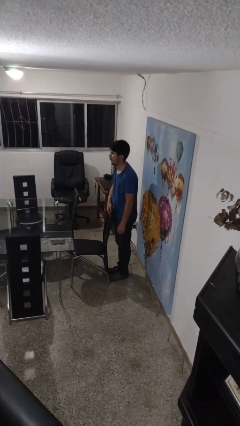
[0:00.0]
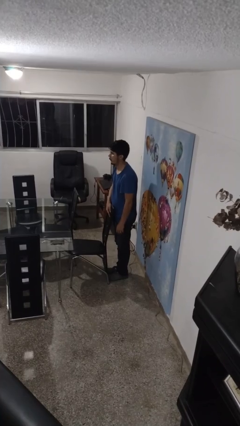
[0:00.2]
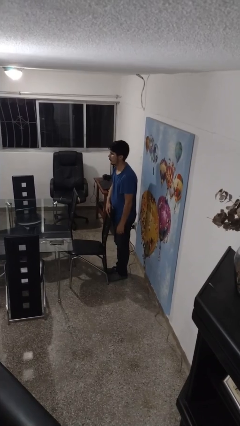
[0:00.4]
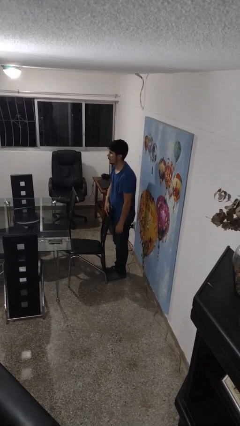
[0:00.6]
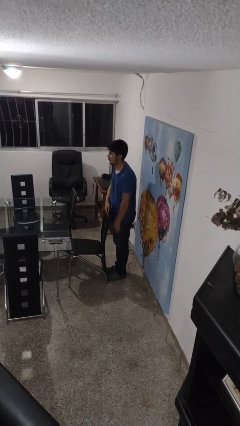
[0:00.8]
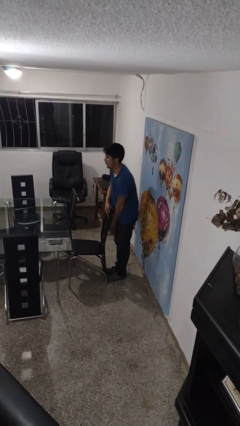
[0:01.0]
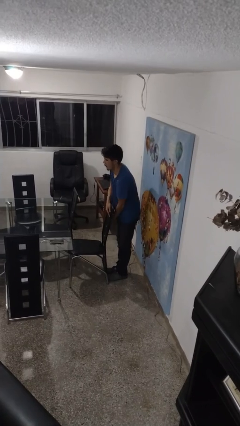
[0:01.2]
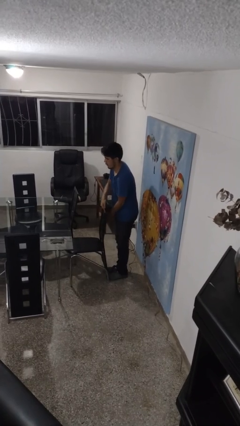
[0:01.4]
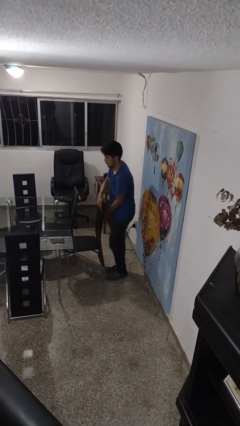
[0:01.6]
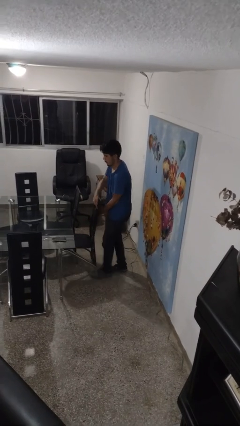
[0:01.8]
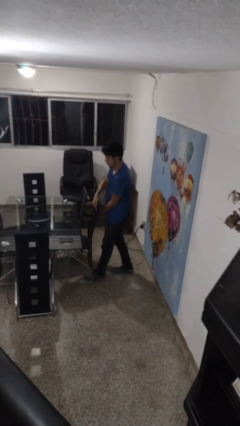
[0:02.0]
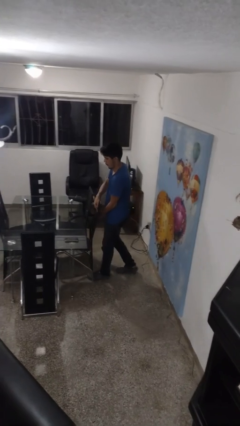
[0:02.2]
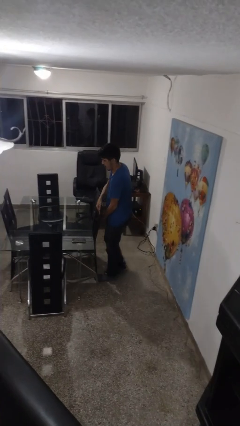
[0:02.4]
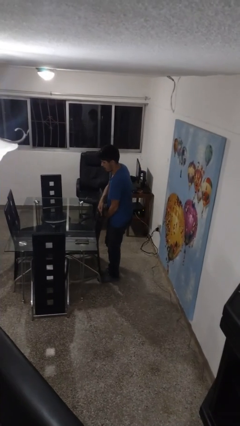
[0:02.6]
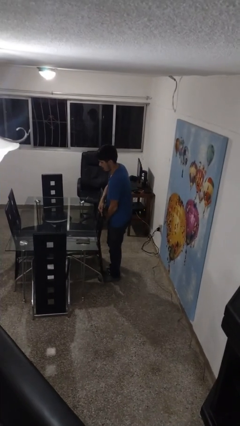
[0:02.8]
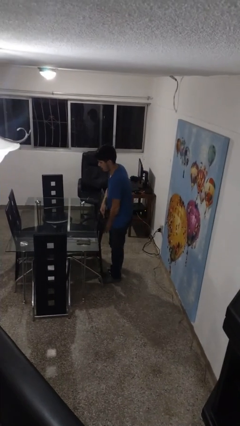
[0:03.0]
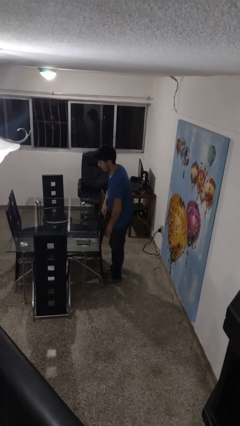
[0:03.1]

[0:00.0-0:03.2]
person pushes in chair

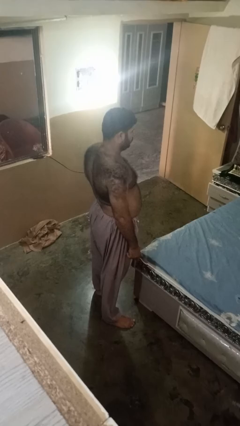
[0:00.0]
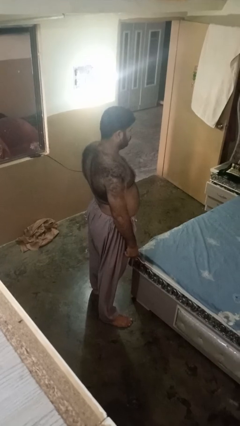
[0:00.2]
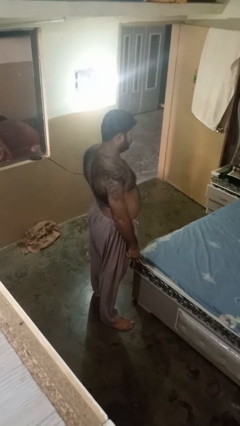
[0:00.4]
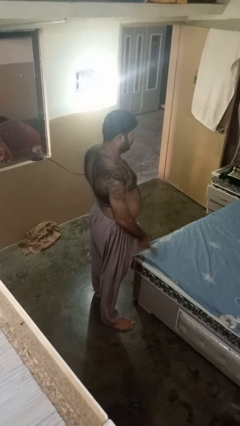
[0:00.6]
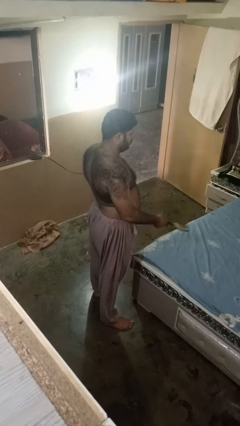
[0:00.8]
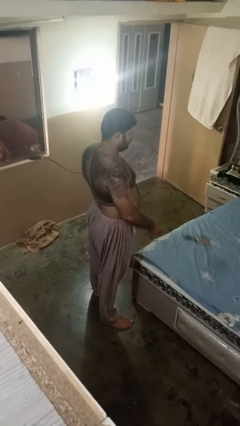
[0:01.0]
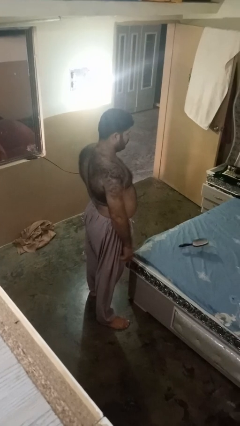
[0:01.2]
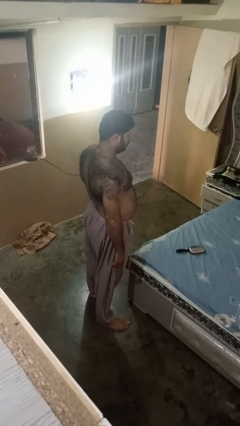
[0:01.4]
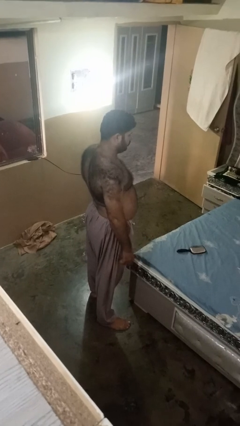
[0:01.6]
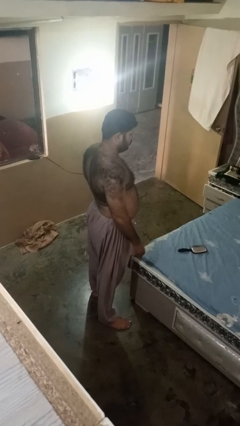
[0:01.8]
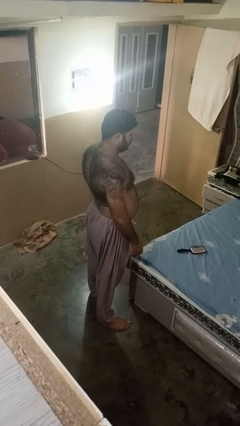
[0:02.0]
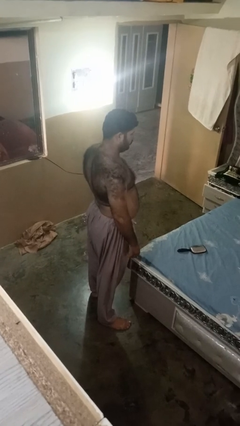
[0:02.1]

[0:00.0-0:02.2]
person throws object on bed

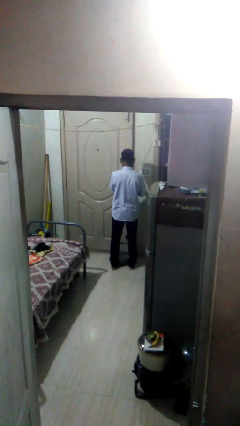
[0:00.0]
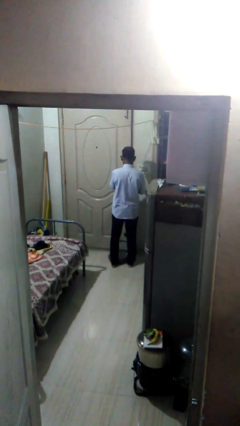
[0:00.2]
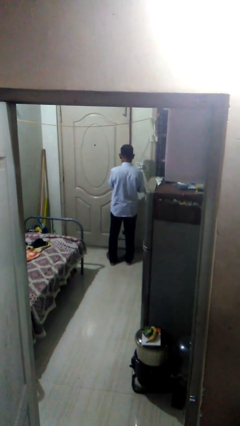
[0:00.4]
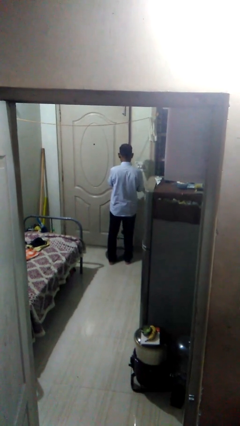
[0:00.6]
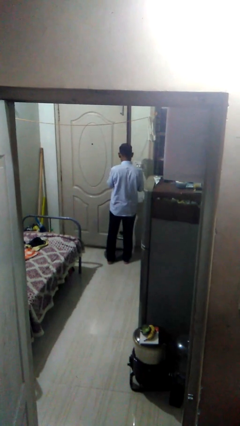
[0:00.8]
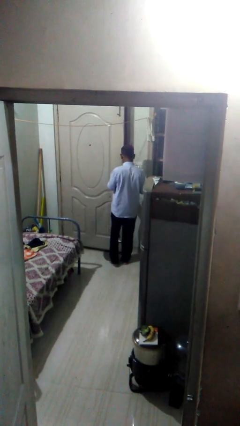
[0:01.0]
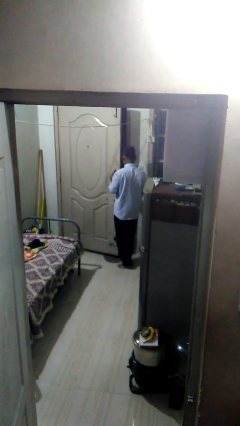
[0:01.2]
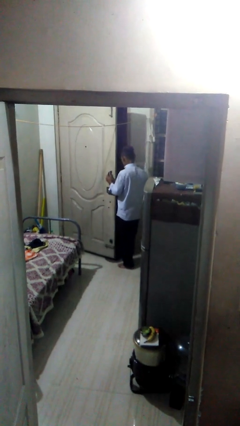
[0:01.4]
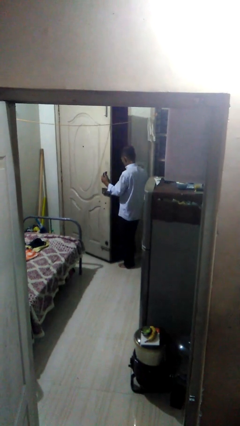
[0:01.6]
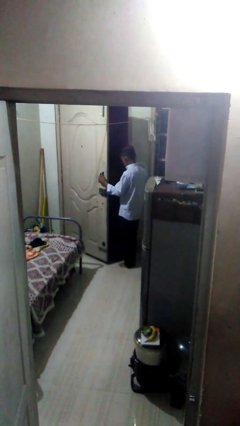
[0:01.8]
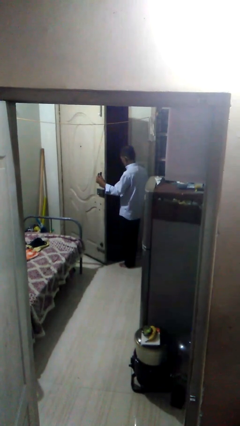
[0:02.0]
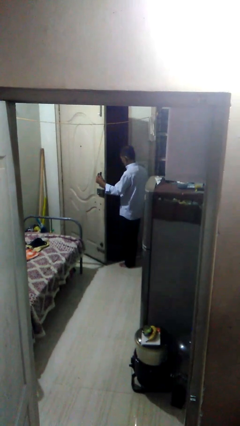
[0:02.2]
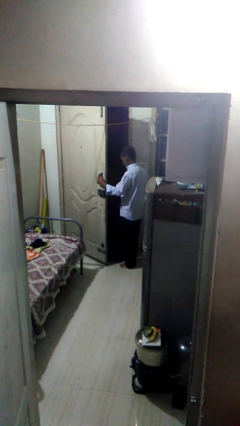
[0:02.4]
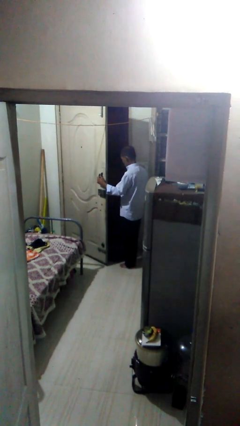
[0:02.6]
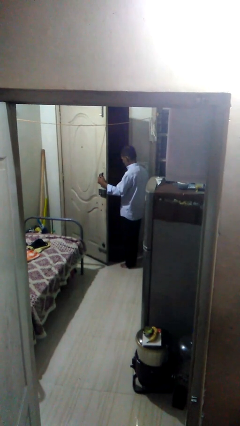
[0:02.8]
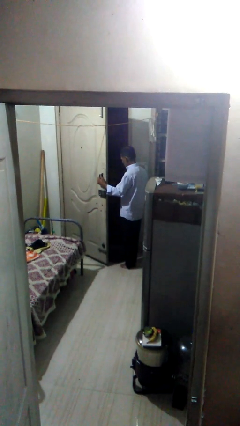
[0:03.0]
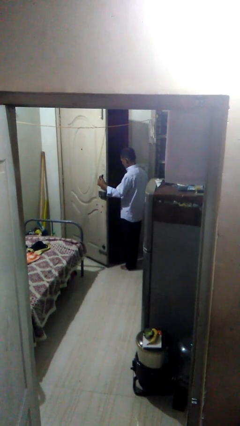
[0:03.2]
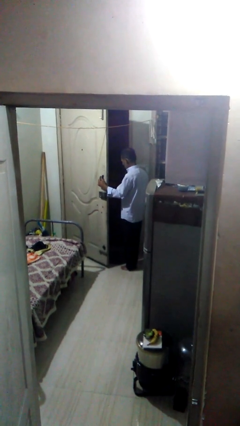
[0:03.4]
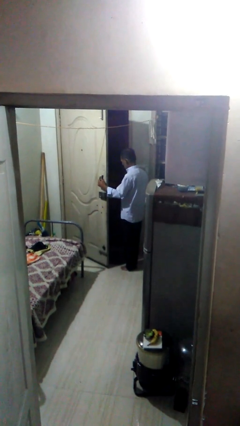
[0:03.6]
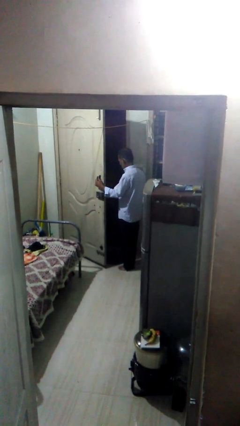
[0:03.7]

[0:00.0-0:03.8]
person opens facility door

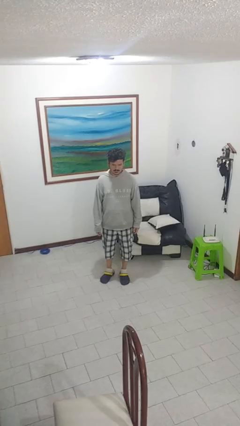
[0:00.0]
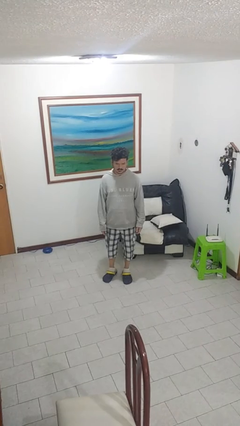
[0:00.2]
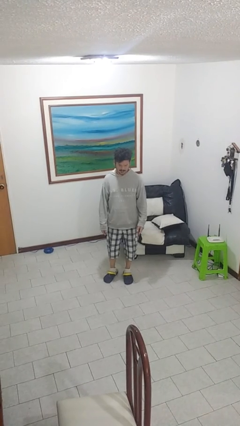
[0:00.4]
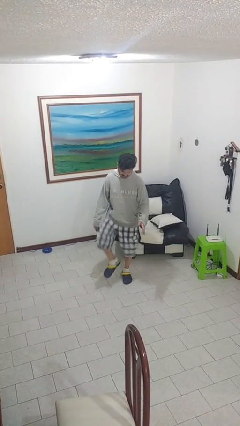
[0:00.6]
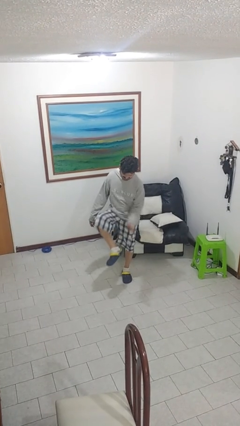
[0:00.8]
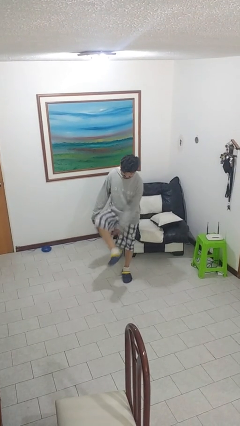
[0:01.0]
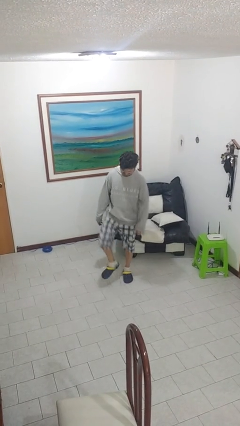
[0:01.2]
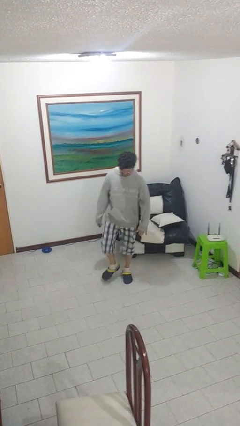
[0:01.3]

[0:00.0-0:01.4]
person swats bug

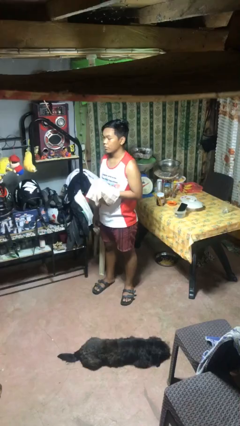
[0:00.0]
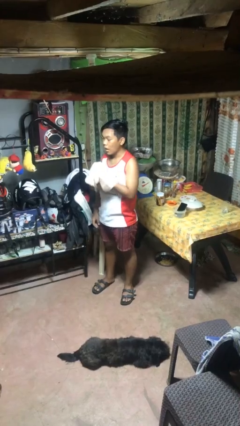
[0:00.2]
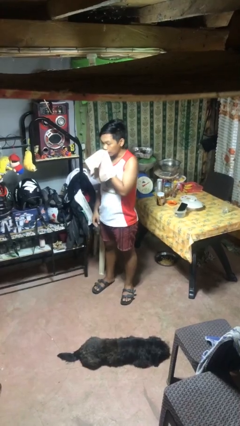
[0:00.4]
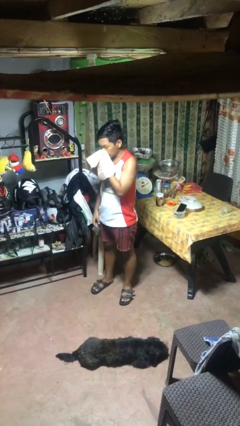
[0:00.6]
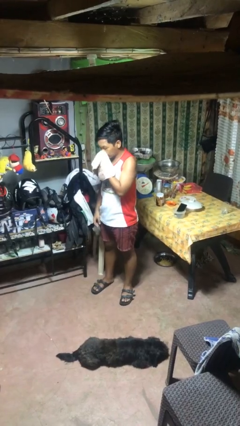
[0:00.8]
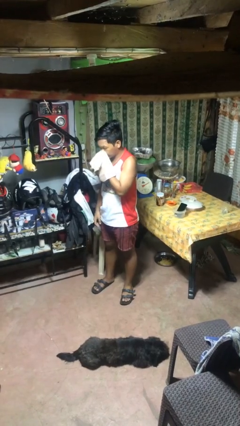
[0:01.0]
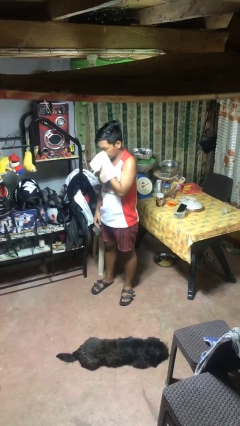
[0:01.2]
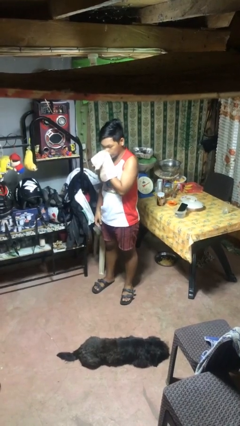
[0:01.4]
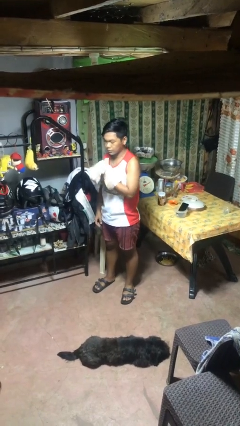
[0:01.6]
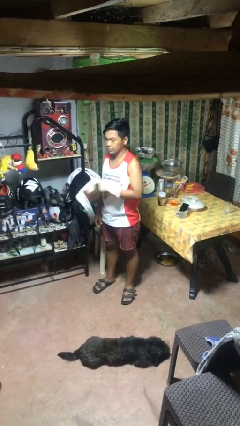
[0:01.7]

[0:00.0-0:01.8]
person blows nose

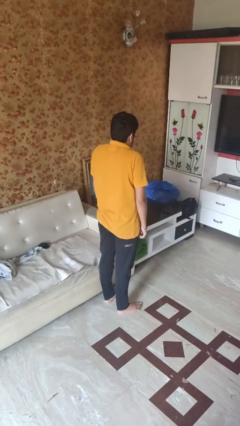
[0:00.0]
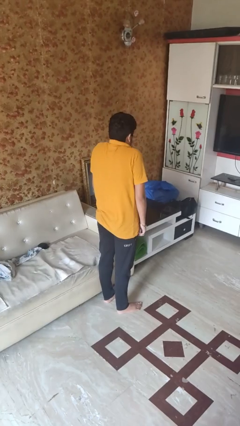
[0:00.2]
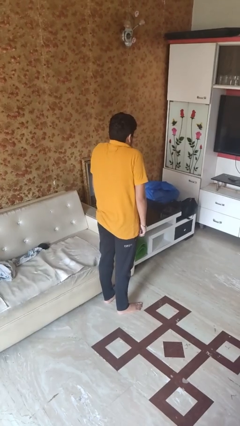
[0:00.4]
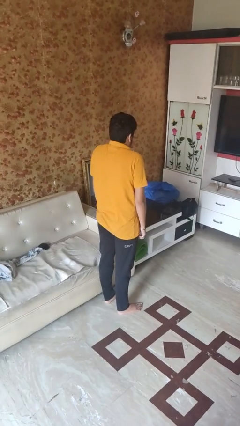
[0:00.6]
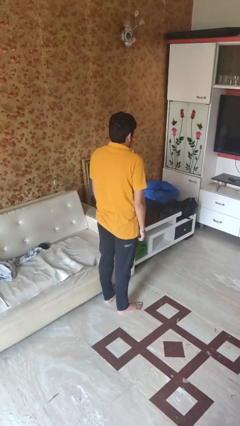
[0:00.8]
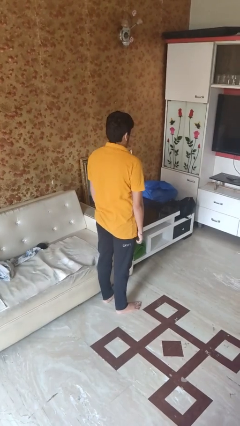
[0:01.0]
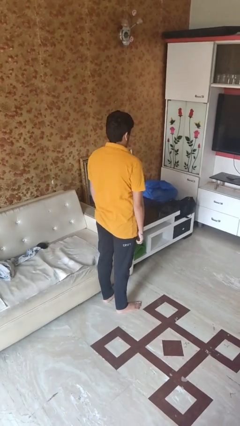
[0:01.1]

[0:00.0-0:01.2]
person shrugs

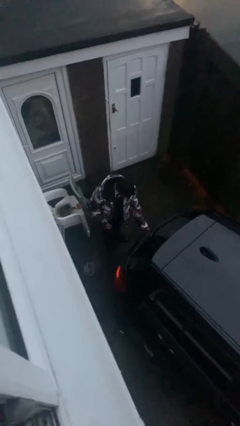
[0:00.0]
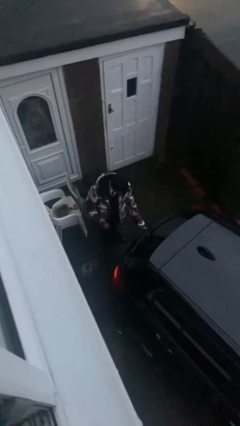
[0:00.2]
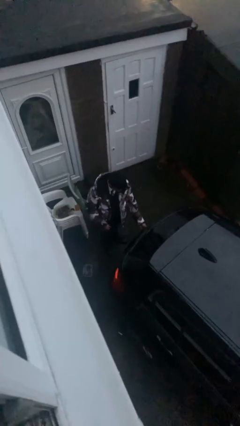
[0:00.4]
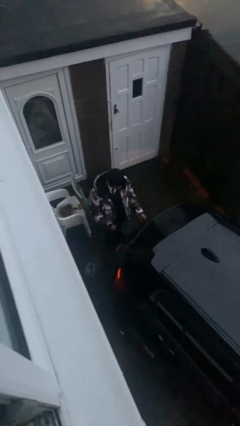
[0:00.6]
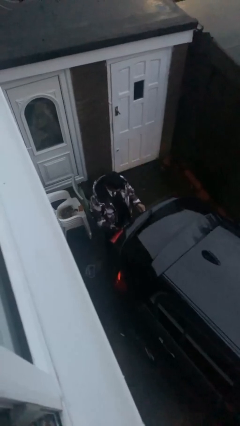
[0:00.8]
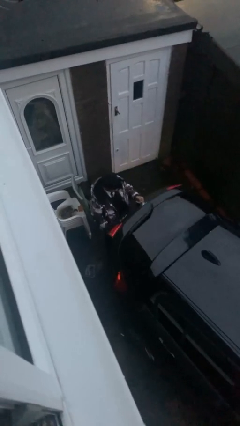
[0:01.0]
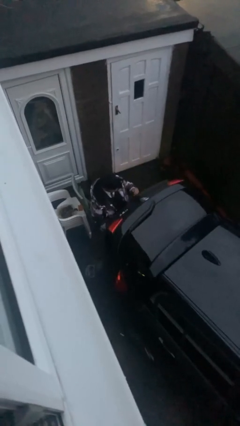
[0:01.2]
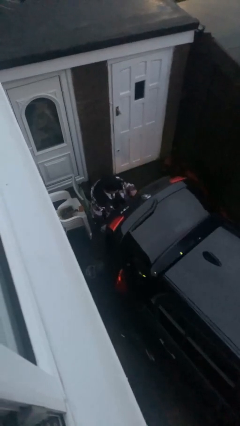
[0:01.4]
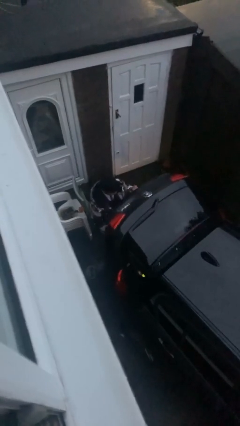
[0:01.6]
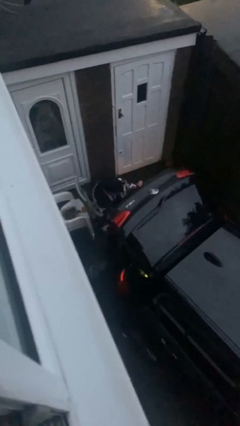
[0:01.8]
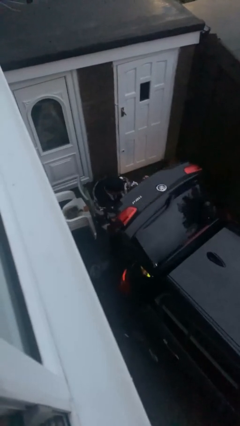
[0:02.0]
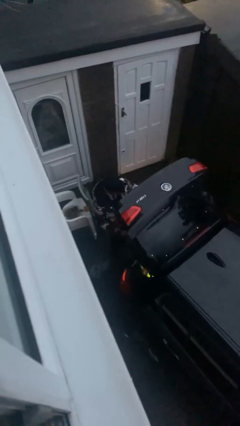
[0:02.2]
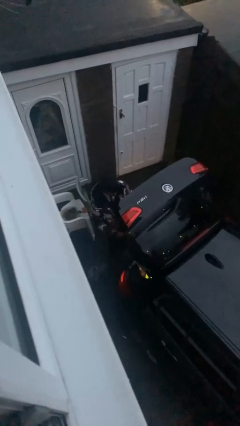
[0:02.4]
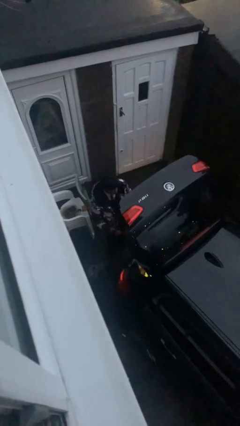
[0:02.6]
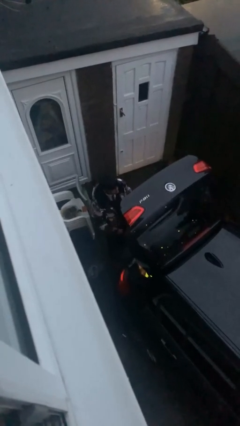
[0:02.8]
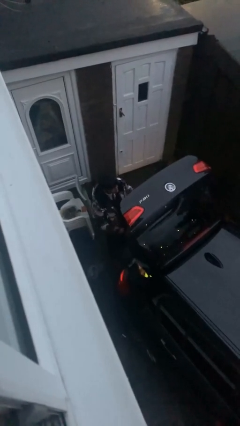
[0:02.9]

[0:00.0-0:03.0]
person opens car trunk

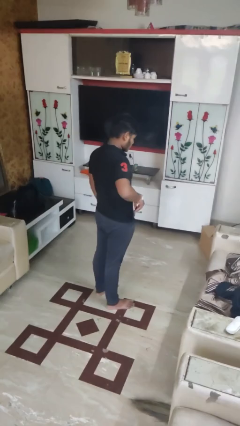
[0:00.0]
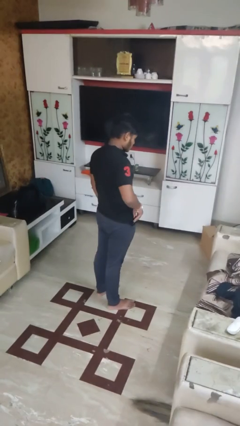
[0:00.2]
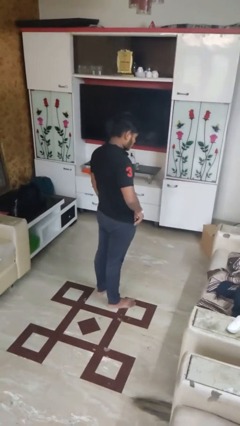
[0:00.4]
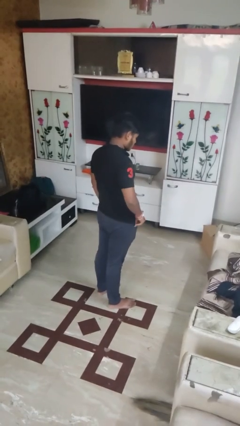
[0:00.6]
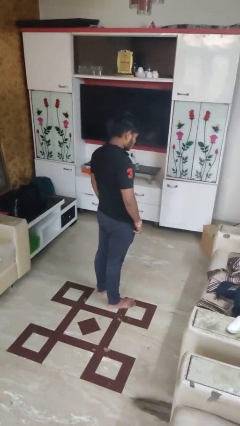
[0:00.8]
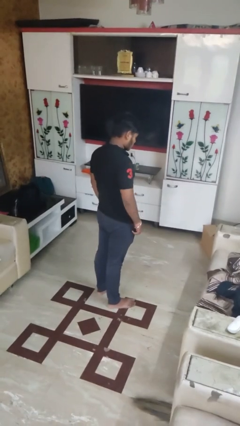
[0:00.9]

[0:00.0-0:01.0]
person puts phone into pocket
